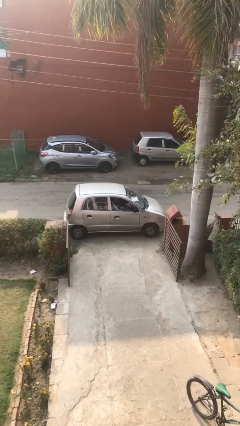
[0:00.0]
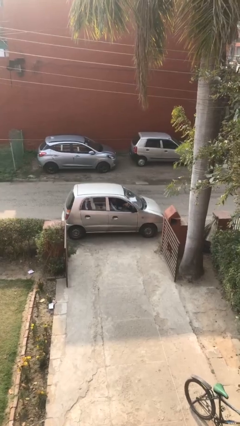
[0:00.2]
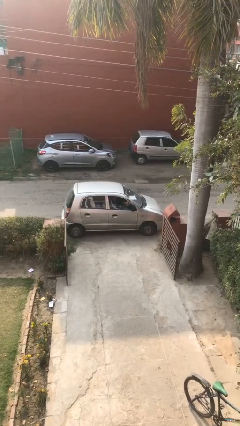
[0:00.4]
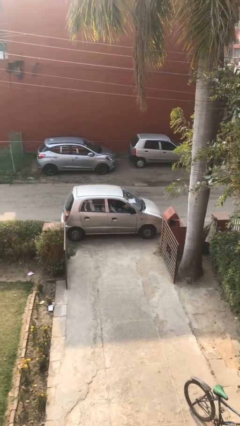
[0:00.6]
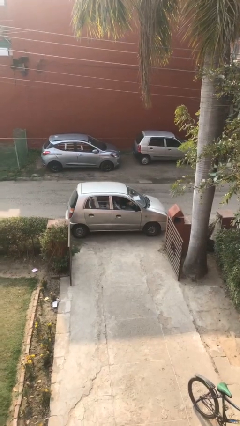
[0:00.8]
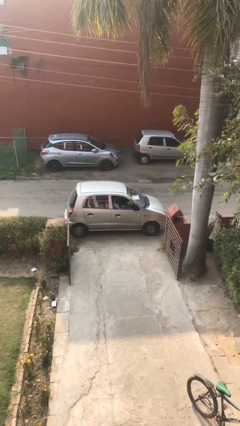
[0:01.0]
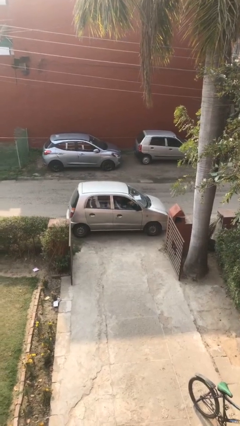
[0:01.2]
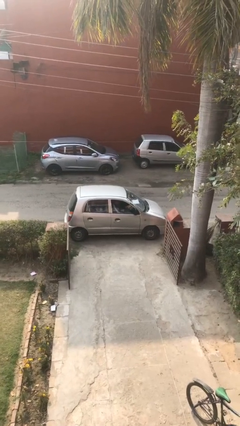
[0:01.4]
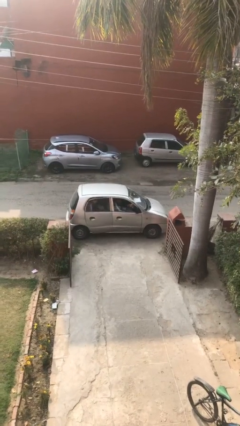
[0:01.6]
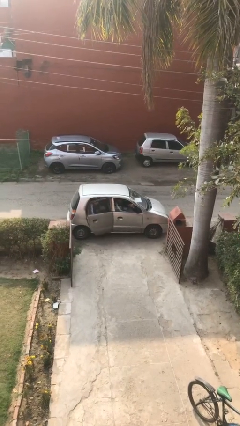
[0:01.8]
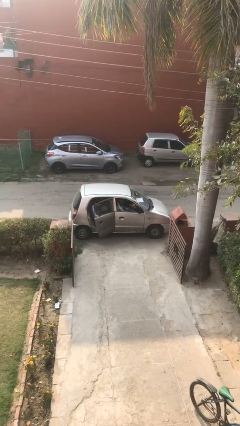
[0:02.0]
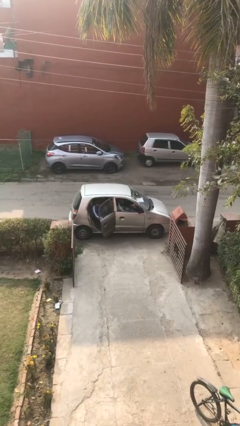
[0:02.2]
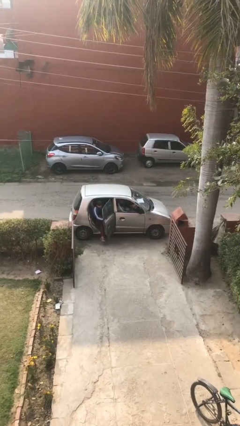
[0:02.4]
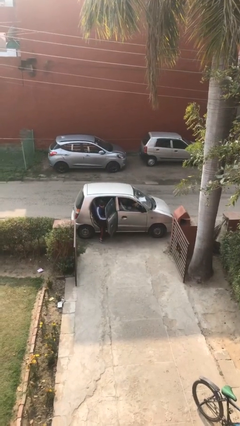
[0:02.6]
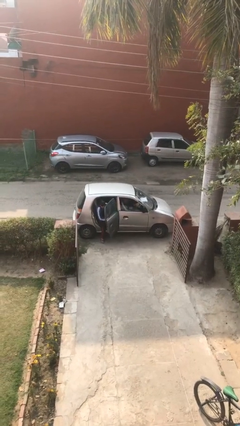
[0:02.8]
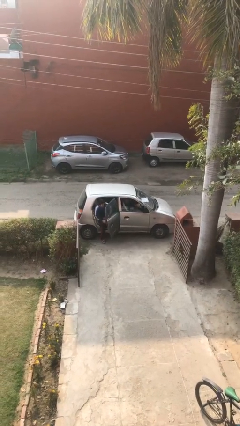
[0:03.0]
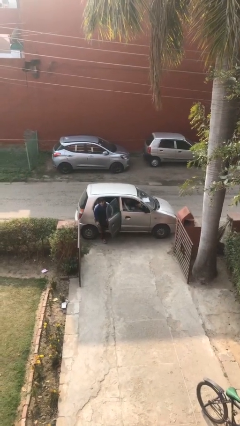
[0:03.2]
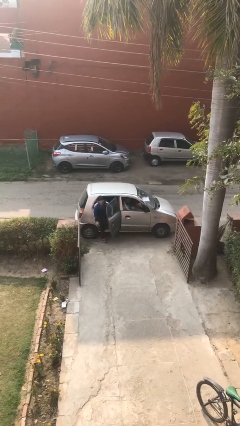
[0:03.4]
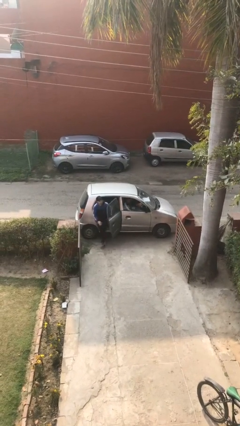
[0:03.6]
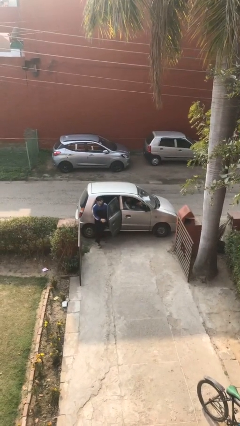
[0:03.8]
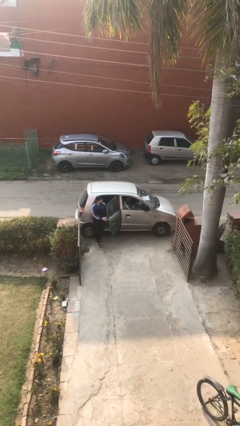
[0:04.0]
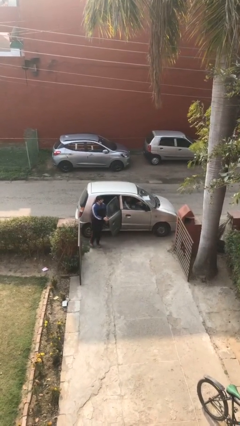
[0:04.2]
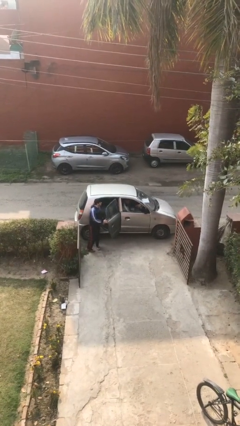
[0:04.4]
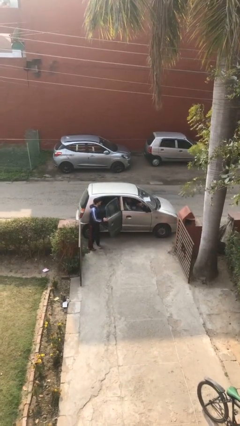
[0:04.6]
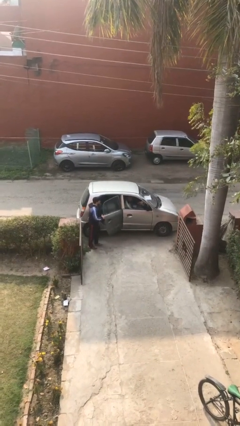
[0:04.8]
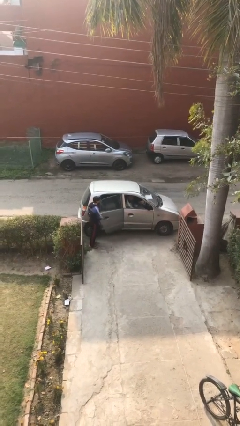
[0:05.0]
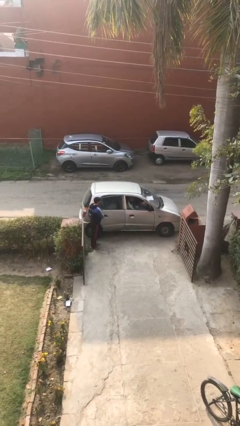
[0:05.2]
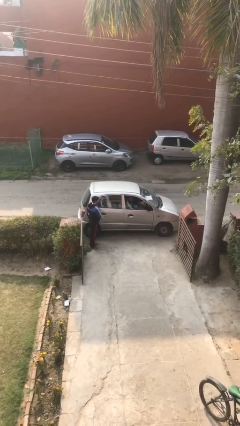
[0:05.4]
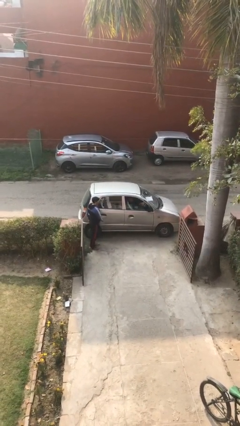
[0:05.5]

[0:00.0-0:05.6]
car drops off person

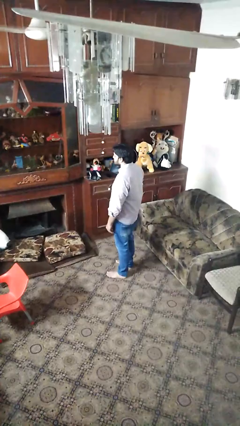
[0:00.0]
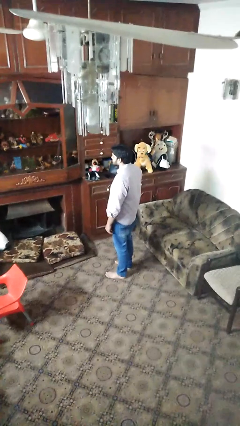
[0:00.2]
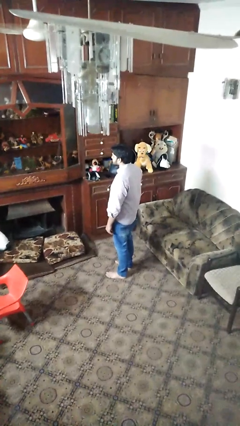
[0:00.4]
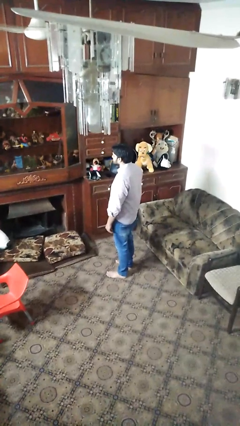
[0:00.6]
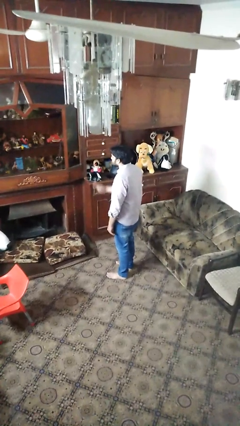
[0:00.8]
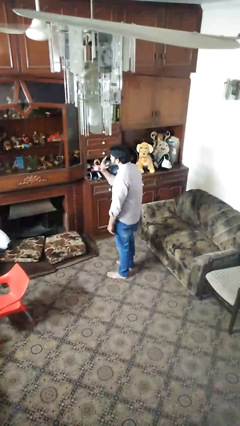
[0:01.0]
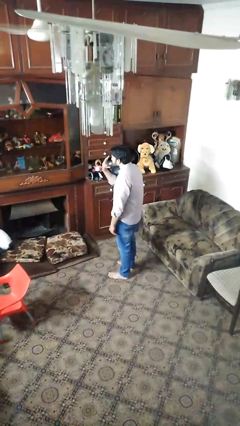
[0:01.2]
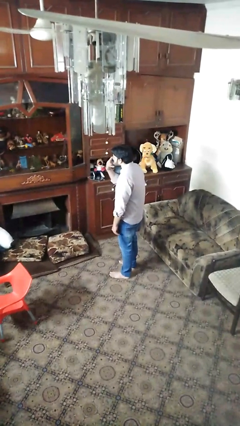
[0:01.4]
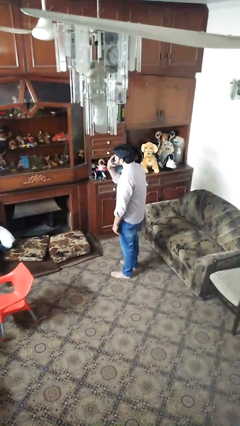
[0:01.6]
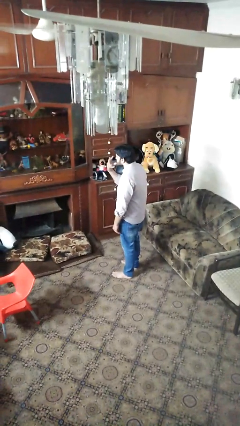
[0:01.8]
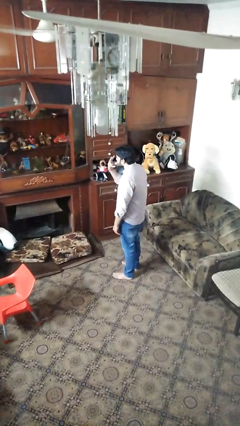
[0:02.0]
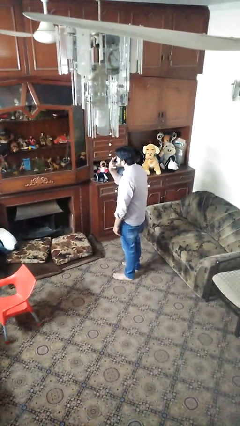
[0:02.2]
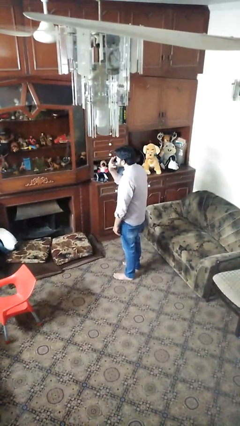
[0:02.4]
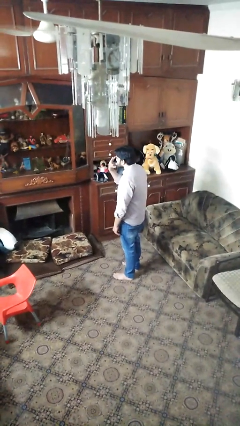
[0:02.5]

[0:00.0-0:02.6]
person gestures watch closely

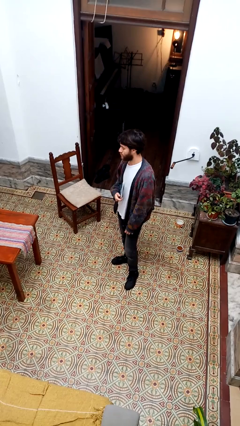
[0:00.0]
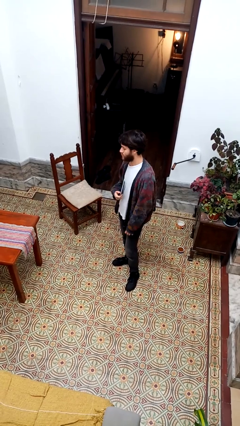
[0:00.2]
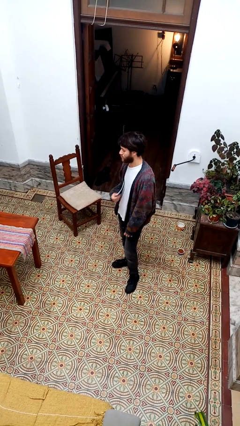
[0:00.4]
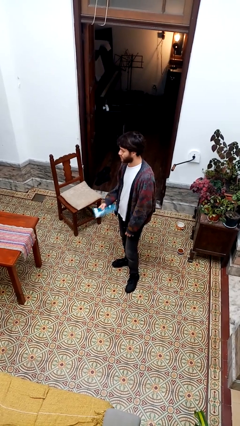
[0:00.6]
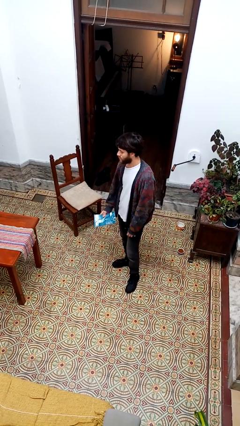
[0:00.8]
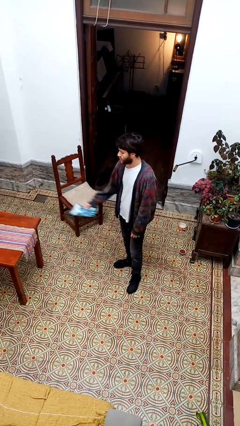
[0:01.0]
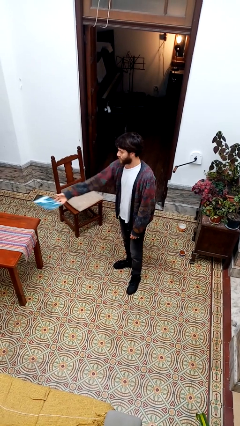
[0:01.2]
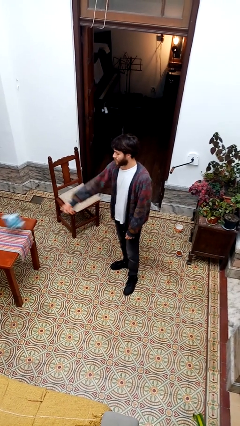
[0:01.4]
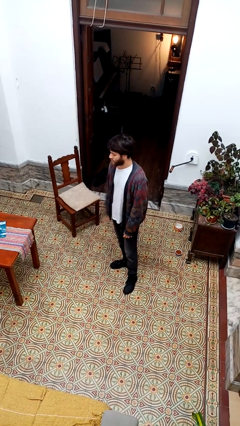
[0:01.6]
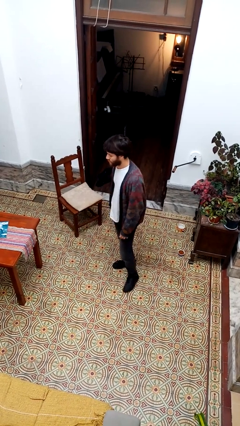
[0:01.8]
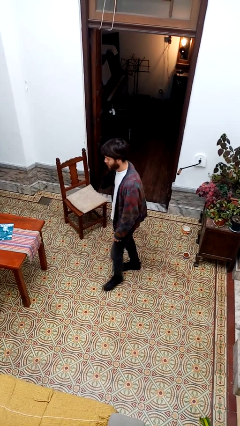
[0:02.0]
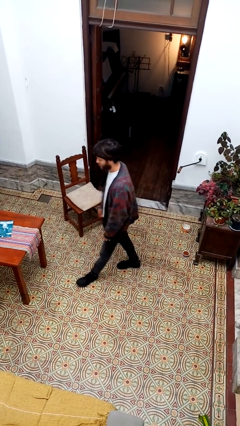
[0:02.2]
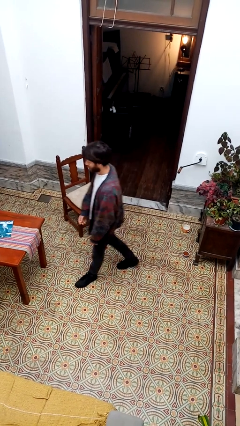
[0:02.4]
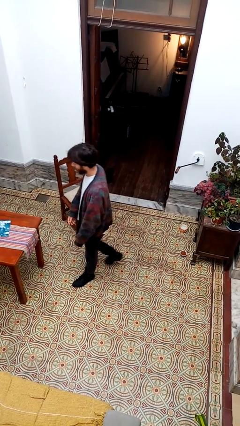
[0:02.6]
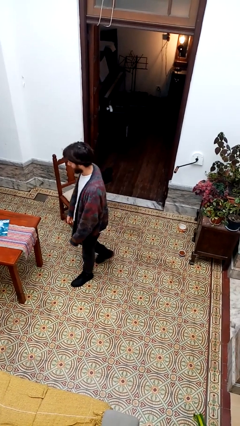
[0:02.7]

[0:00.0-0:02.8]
person throws object on table

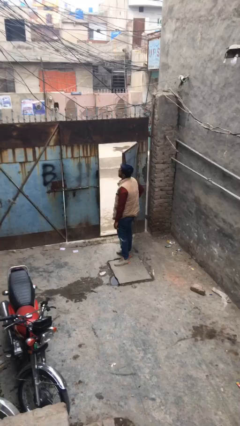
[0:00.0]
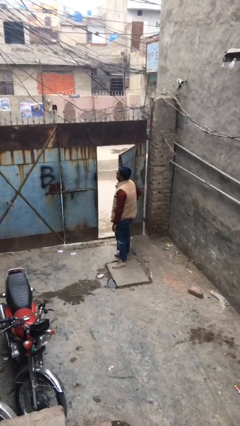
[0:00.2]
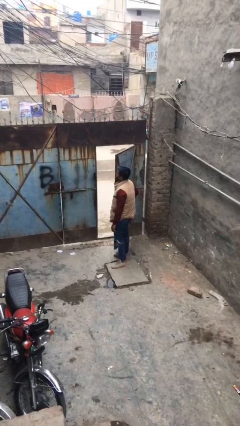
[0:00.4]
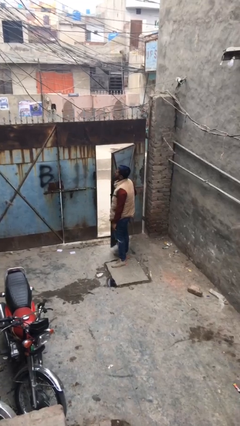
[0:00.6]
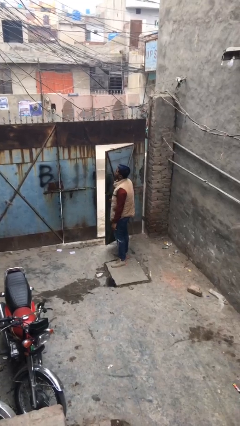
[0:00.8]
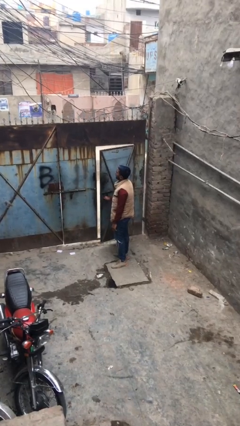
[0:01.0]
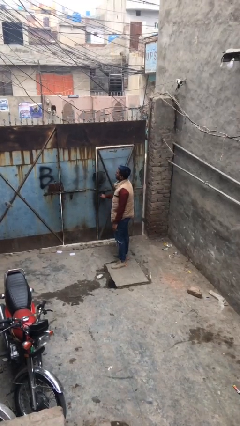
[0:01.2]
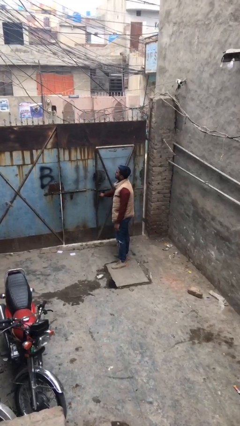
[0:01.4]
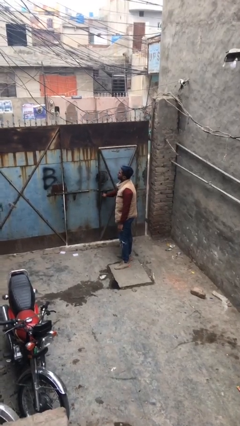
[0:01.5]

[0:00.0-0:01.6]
person closes facility door

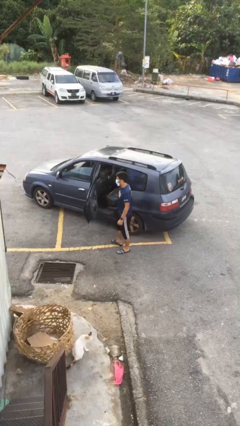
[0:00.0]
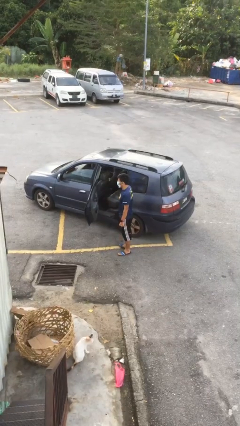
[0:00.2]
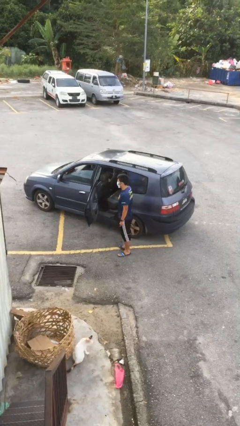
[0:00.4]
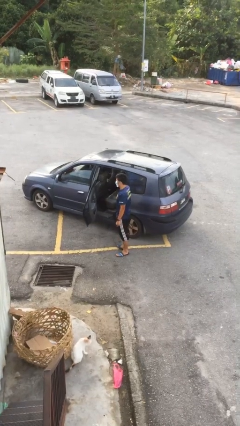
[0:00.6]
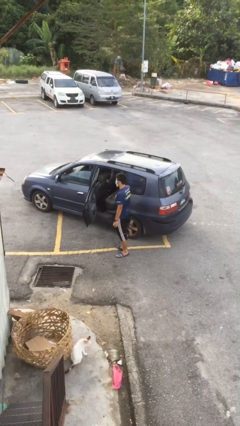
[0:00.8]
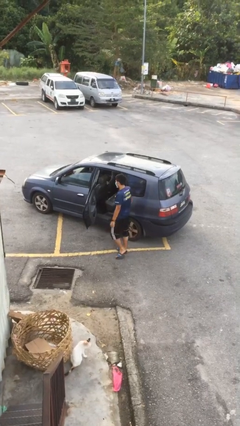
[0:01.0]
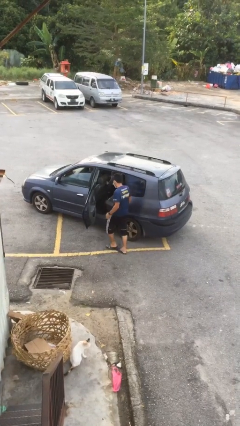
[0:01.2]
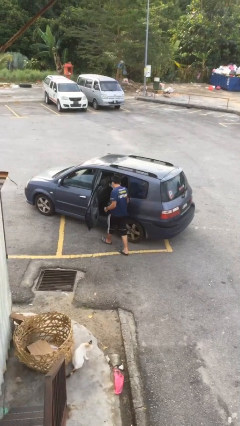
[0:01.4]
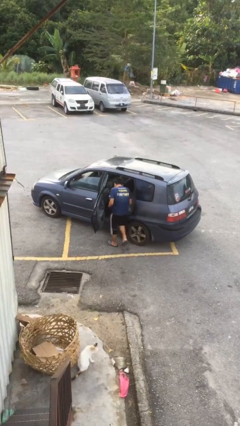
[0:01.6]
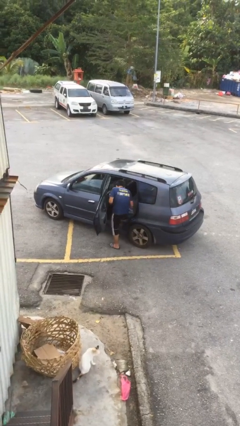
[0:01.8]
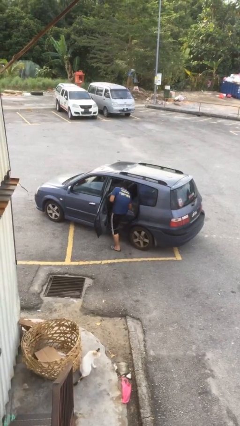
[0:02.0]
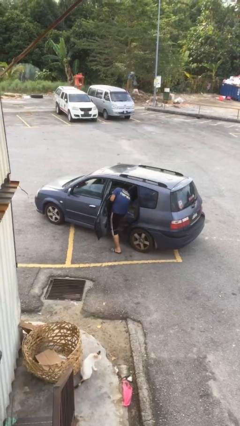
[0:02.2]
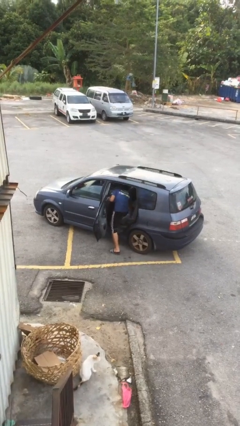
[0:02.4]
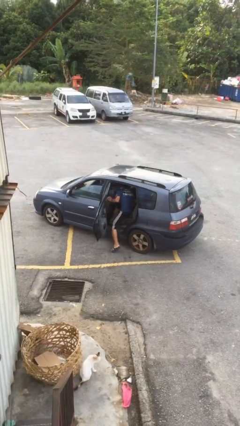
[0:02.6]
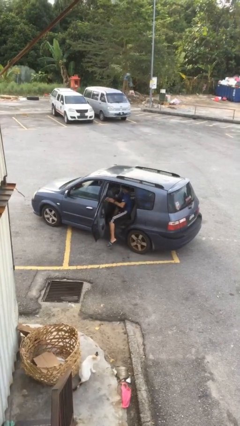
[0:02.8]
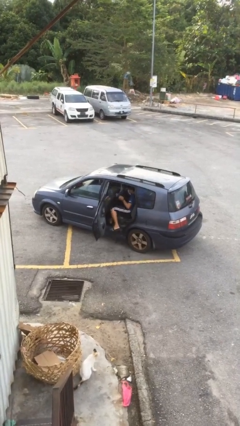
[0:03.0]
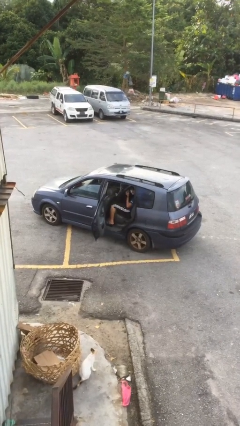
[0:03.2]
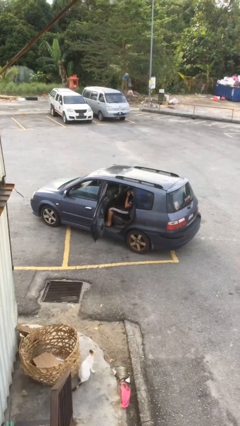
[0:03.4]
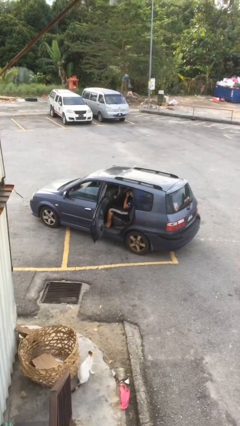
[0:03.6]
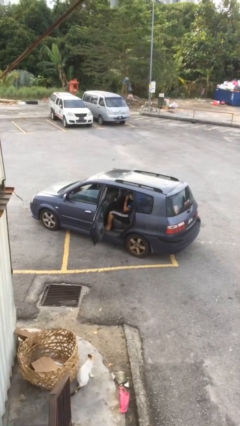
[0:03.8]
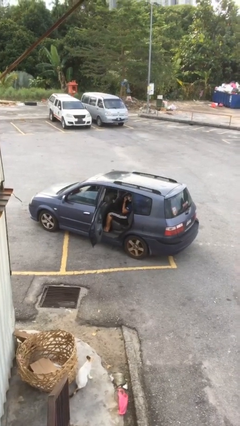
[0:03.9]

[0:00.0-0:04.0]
person enters car

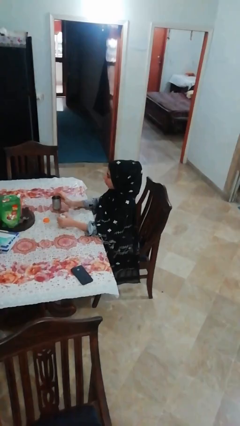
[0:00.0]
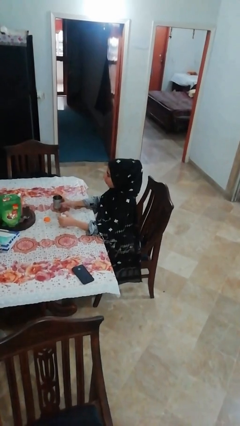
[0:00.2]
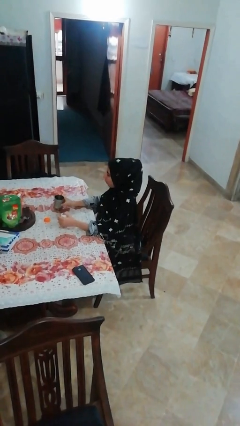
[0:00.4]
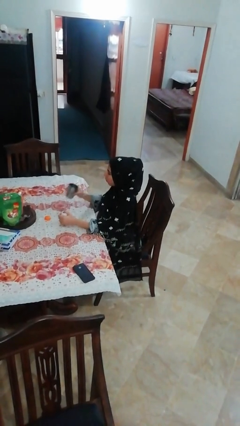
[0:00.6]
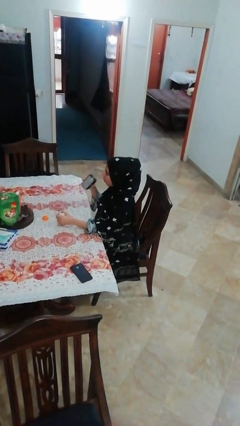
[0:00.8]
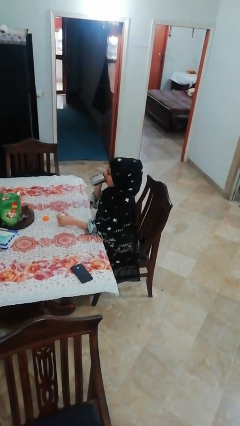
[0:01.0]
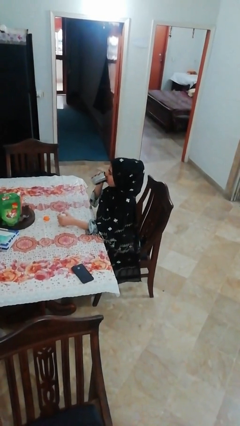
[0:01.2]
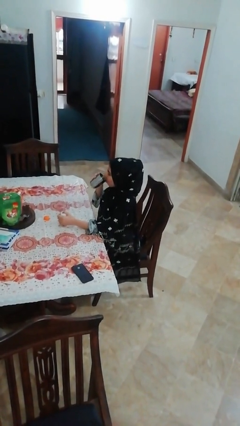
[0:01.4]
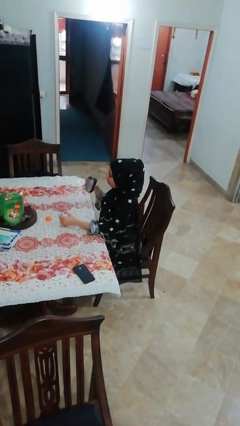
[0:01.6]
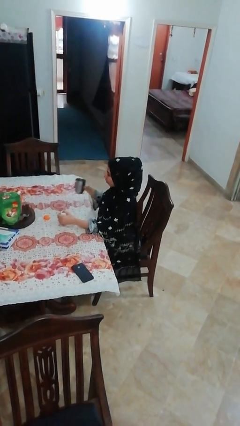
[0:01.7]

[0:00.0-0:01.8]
person drinks from cup
